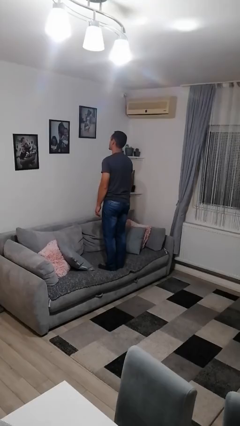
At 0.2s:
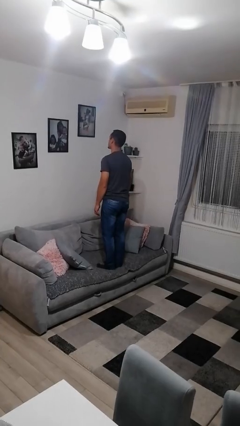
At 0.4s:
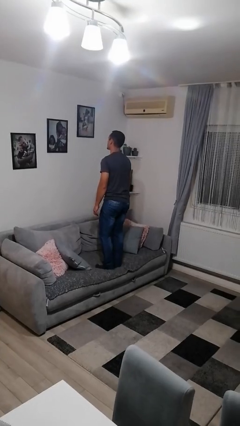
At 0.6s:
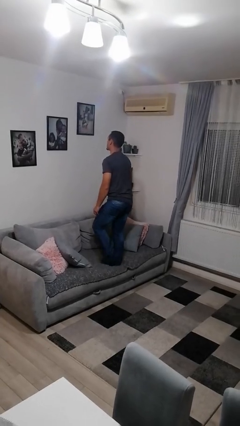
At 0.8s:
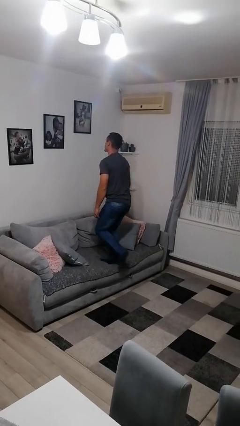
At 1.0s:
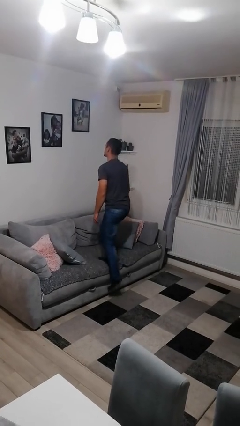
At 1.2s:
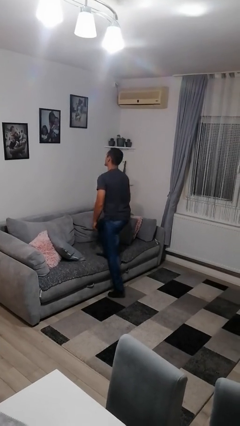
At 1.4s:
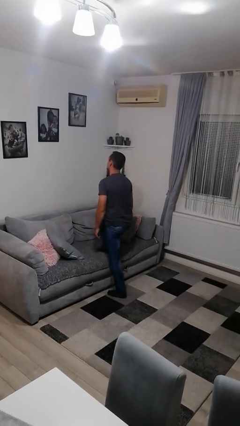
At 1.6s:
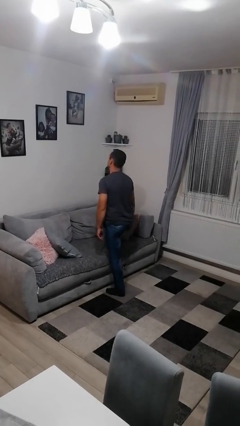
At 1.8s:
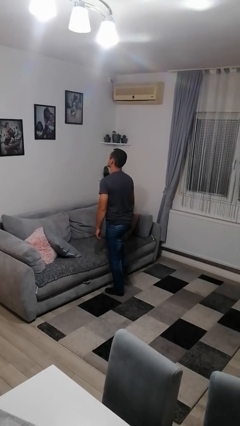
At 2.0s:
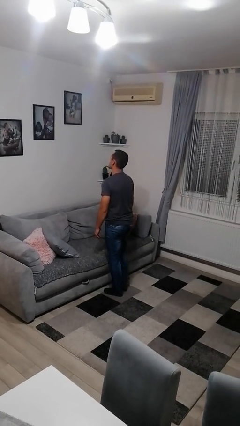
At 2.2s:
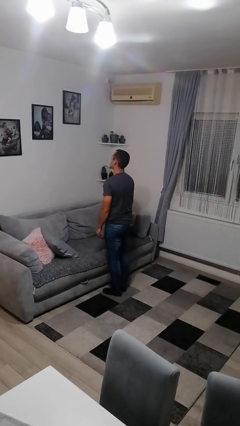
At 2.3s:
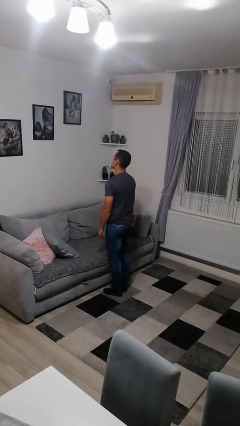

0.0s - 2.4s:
person climbs off couch

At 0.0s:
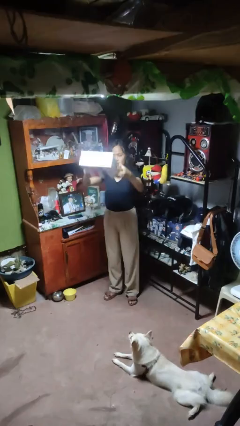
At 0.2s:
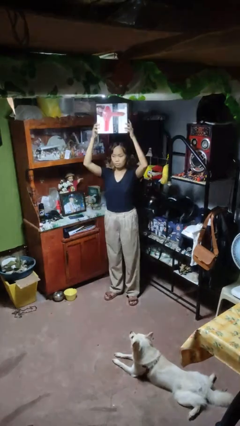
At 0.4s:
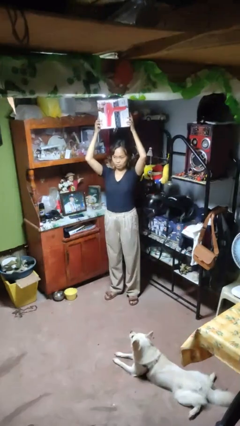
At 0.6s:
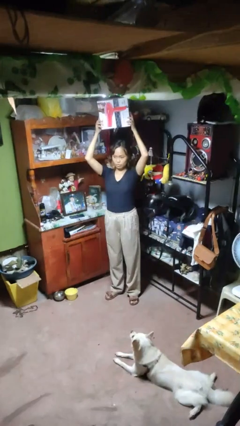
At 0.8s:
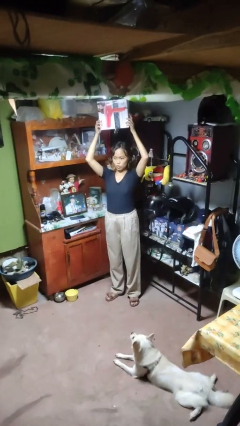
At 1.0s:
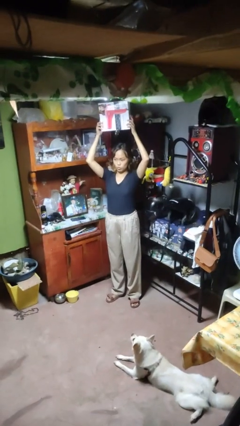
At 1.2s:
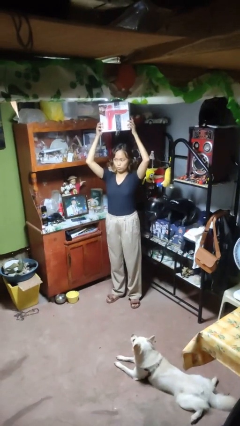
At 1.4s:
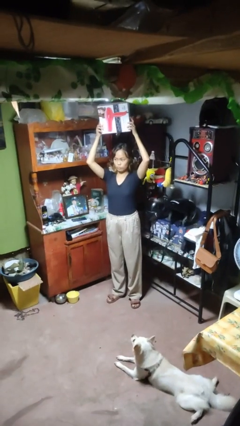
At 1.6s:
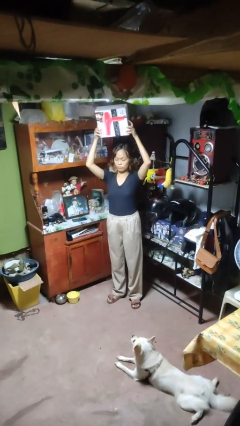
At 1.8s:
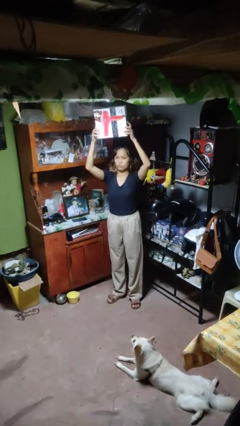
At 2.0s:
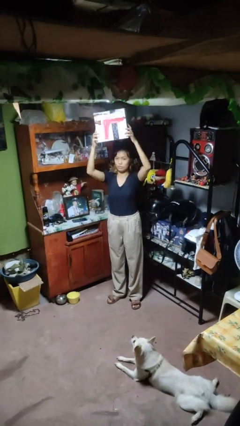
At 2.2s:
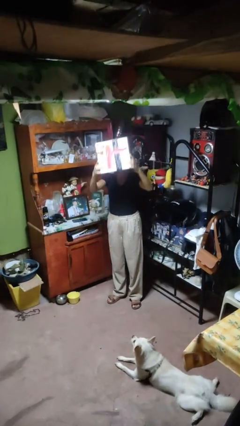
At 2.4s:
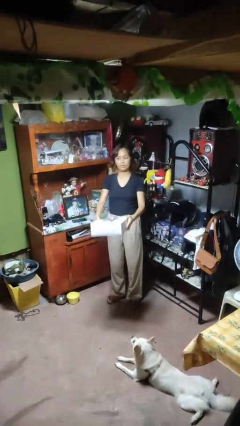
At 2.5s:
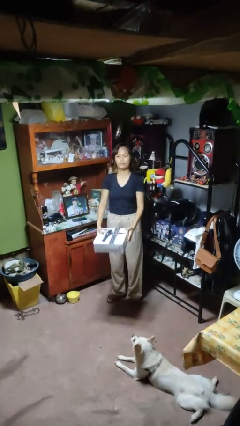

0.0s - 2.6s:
person holds object above head

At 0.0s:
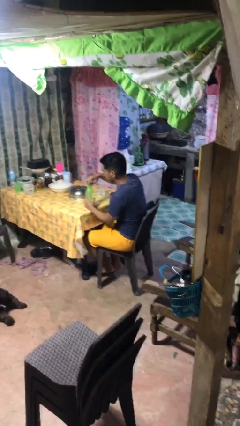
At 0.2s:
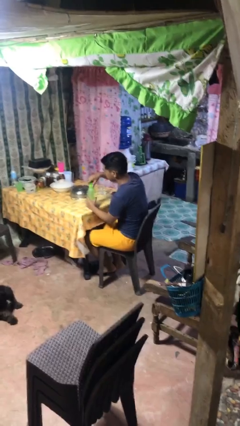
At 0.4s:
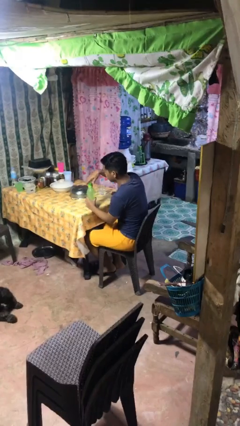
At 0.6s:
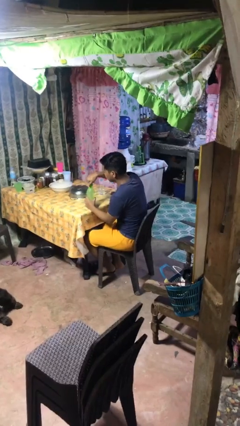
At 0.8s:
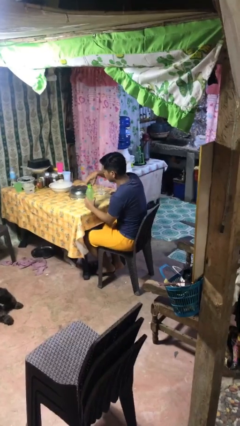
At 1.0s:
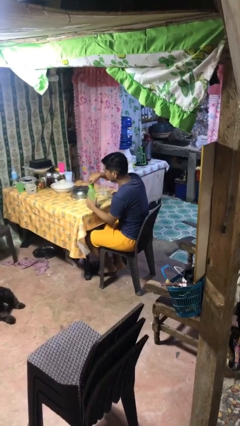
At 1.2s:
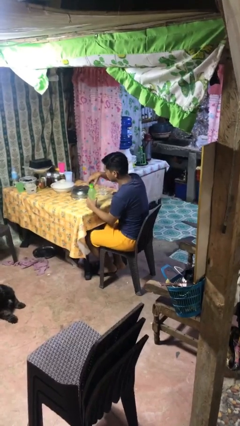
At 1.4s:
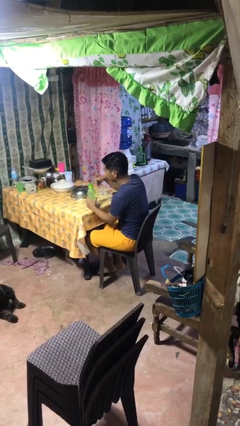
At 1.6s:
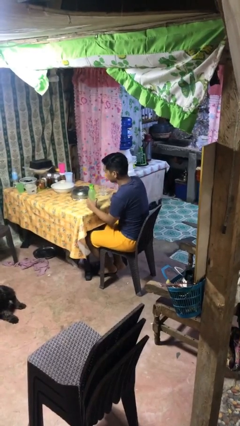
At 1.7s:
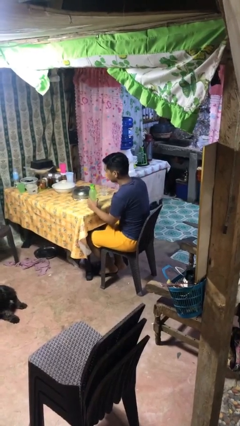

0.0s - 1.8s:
person screws lid to bottle

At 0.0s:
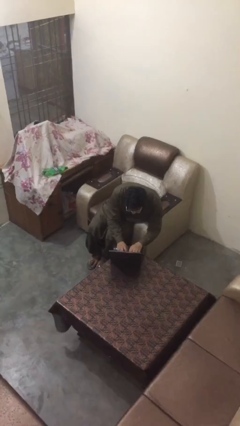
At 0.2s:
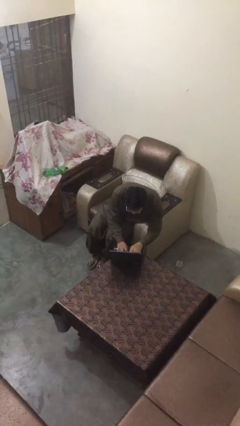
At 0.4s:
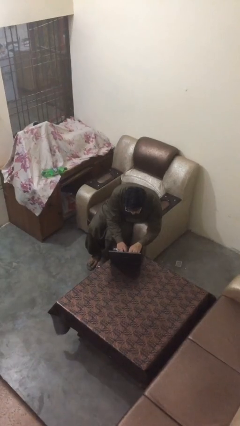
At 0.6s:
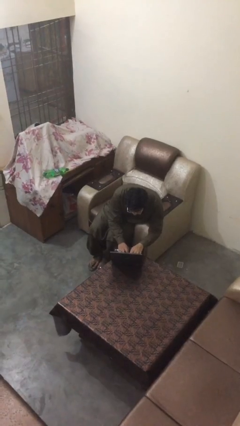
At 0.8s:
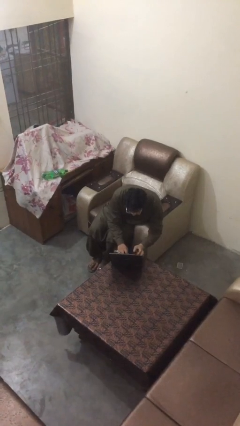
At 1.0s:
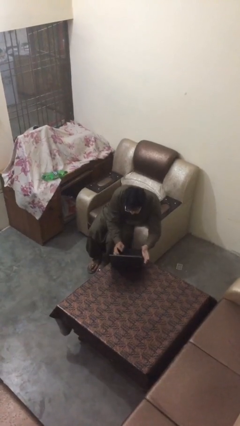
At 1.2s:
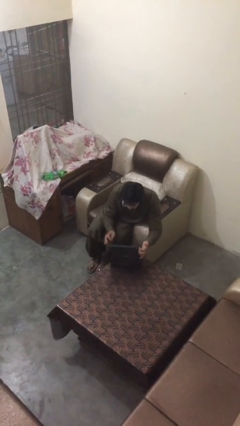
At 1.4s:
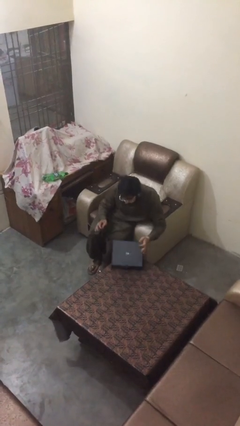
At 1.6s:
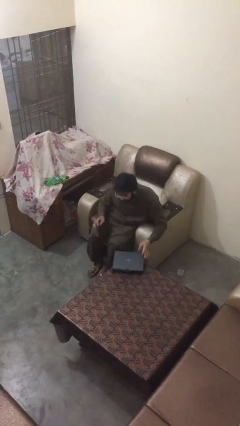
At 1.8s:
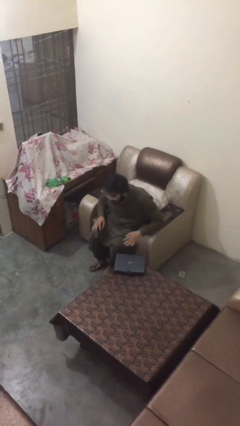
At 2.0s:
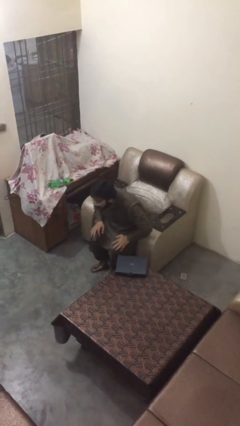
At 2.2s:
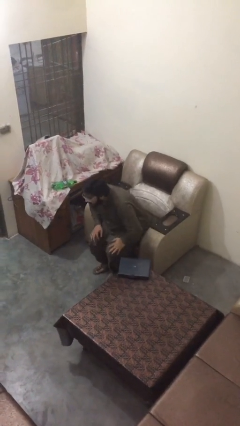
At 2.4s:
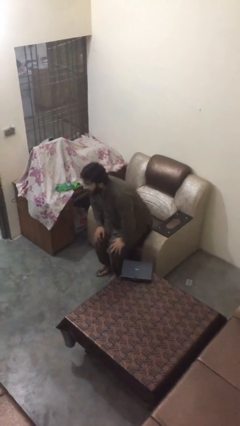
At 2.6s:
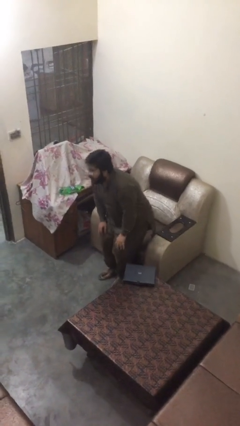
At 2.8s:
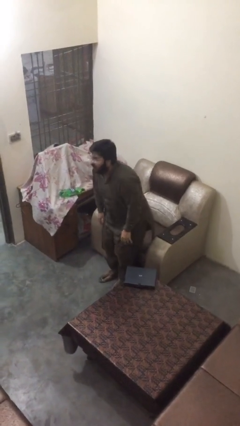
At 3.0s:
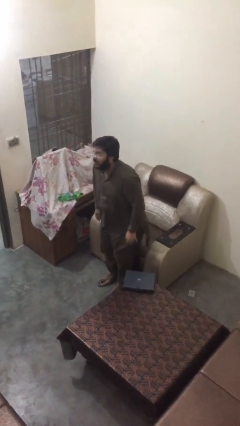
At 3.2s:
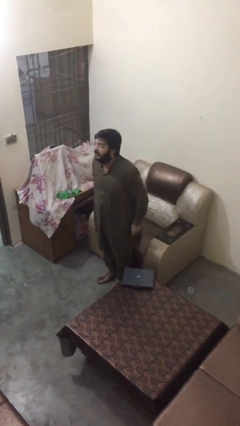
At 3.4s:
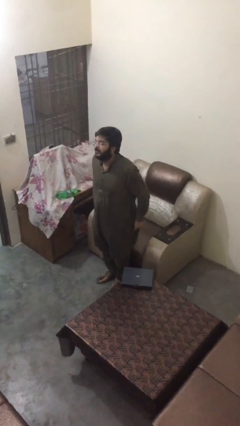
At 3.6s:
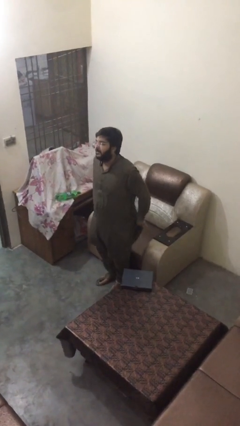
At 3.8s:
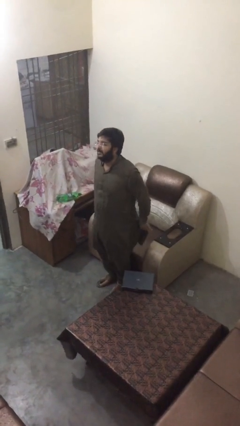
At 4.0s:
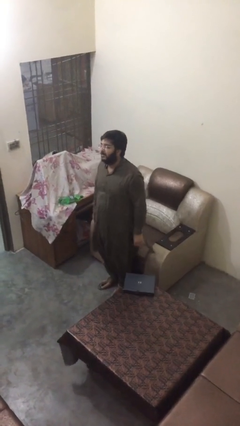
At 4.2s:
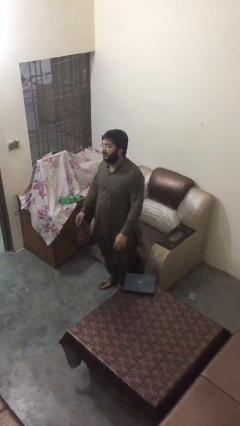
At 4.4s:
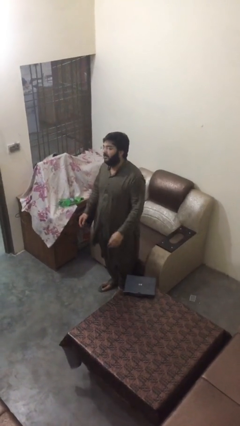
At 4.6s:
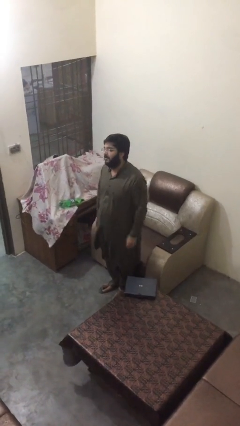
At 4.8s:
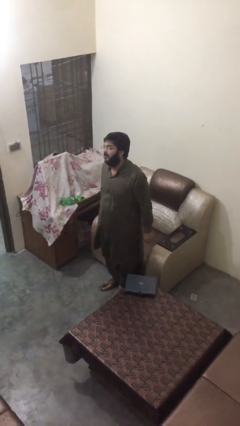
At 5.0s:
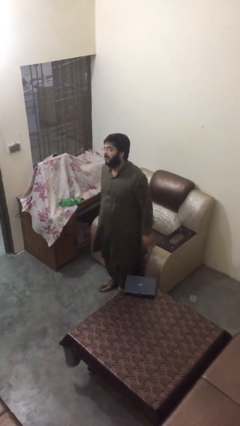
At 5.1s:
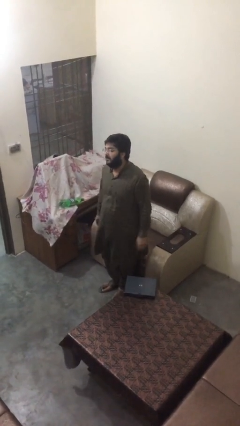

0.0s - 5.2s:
person stands up

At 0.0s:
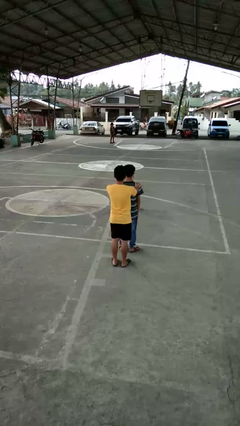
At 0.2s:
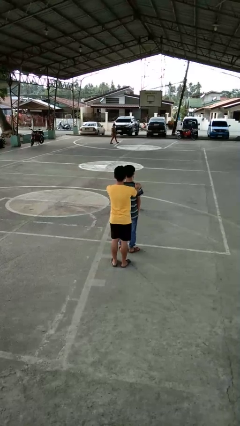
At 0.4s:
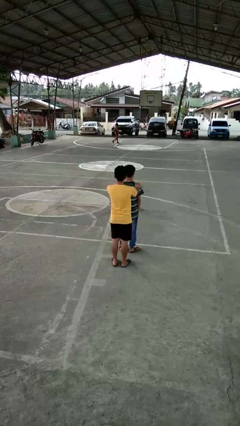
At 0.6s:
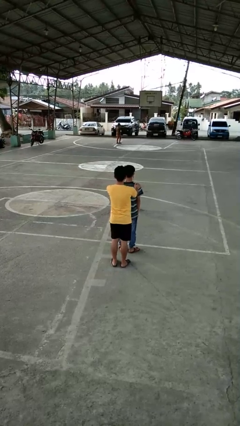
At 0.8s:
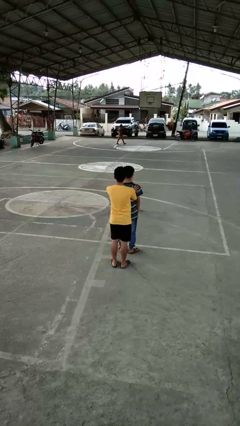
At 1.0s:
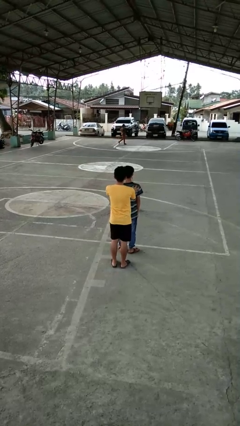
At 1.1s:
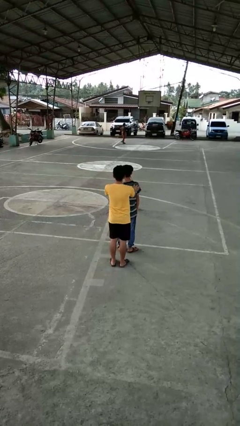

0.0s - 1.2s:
person grabs person by shoulder

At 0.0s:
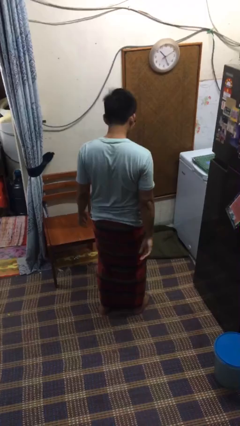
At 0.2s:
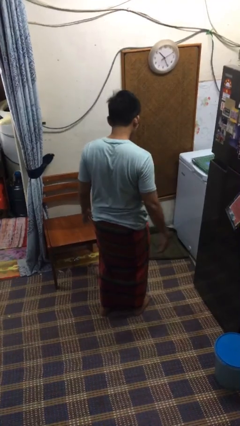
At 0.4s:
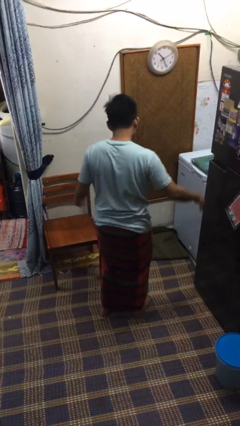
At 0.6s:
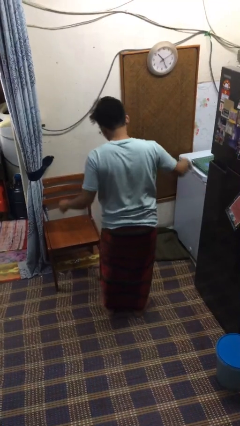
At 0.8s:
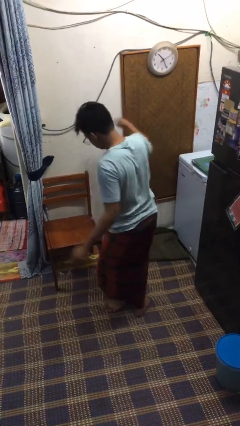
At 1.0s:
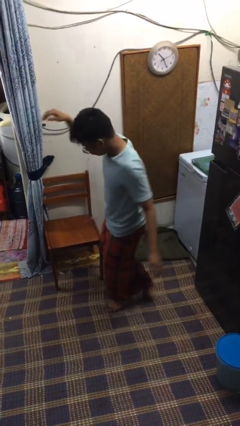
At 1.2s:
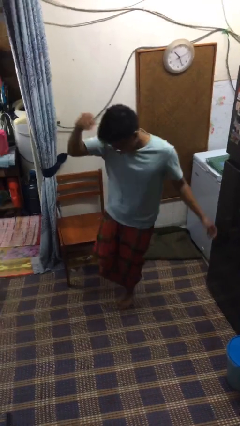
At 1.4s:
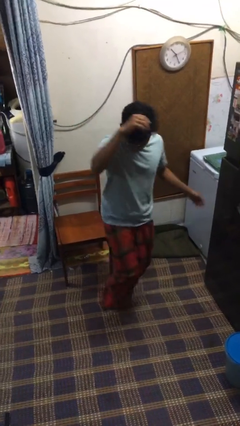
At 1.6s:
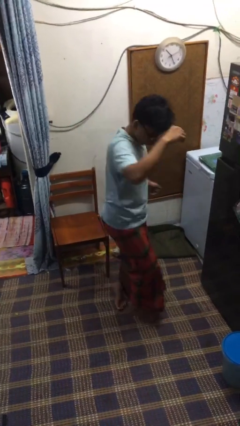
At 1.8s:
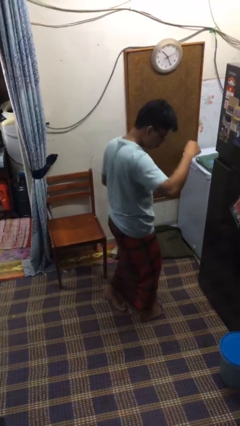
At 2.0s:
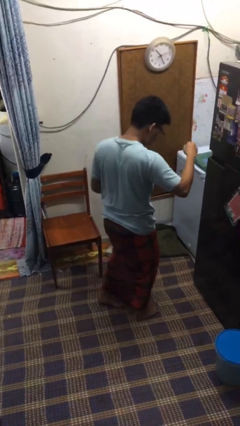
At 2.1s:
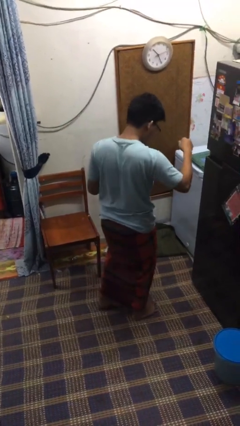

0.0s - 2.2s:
person twirls

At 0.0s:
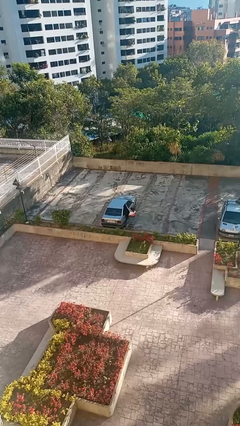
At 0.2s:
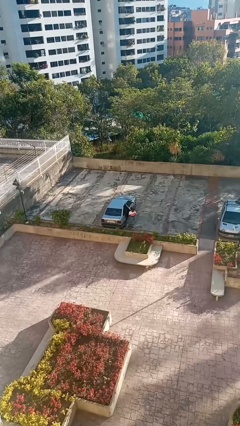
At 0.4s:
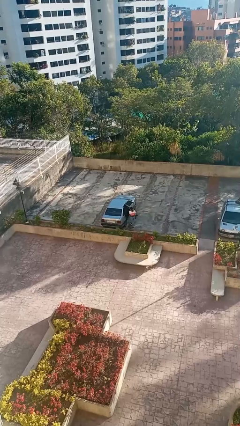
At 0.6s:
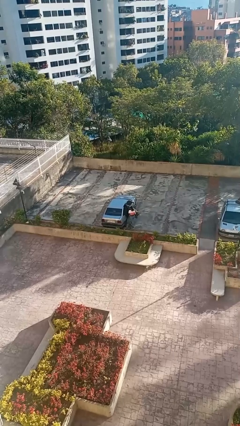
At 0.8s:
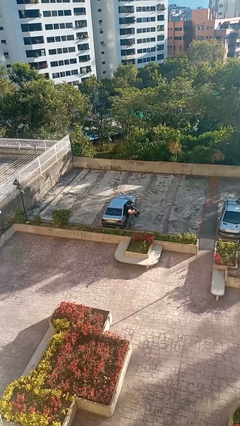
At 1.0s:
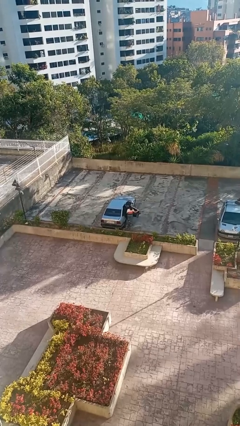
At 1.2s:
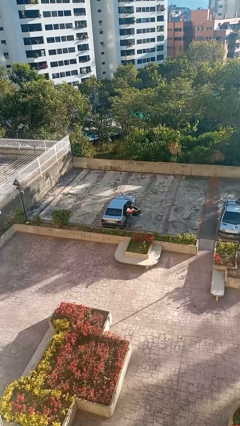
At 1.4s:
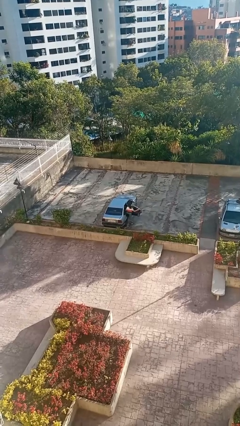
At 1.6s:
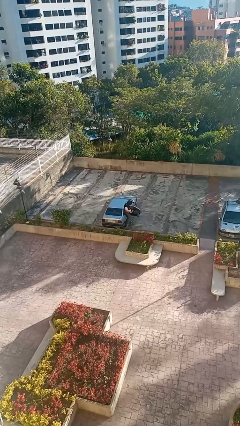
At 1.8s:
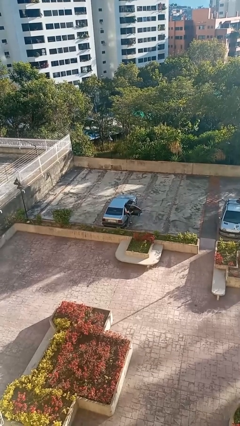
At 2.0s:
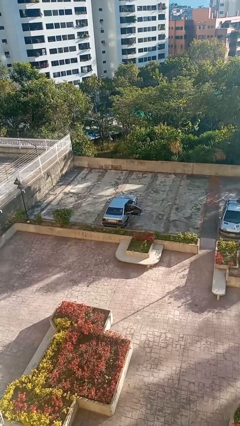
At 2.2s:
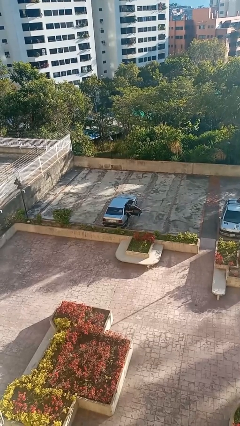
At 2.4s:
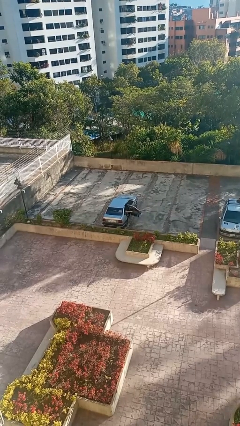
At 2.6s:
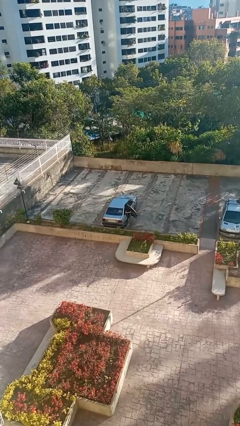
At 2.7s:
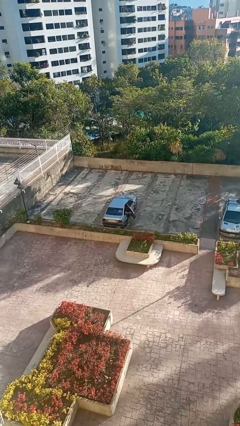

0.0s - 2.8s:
car picks up person
